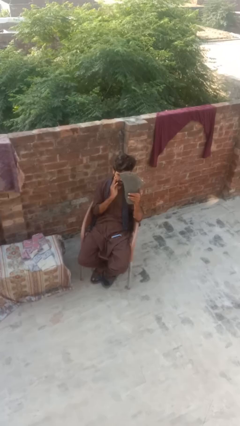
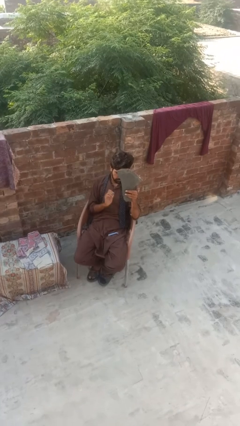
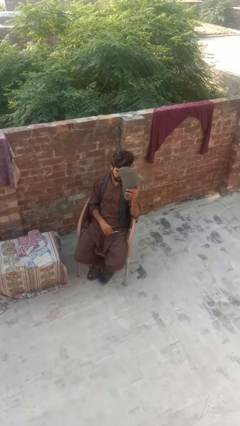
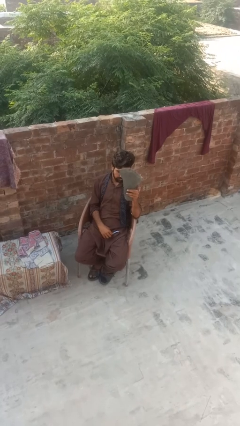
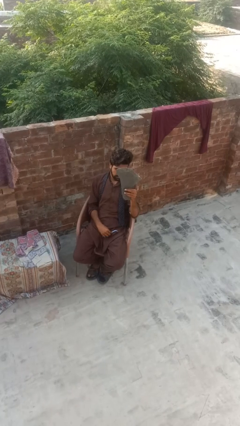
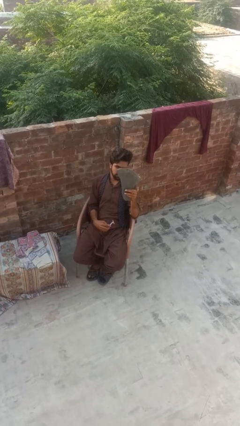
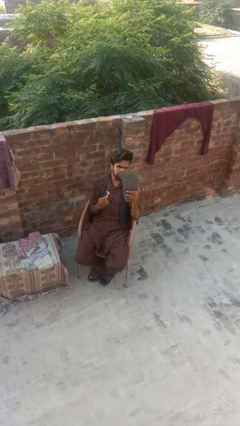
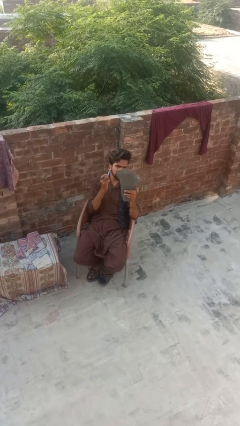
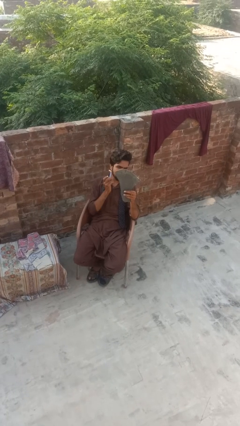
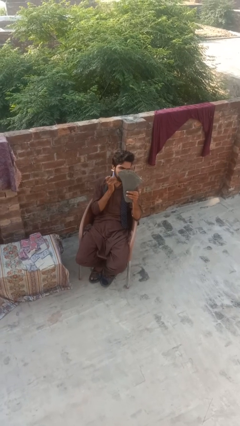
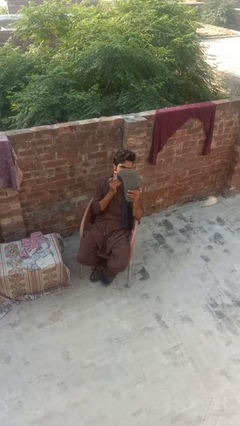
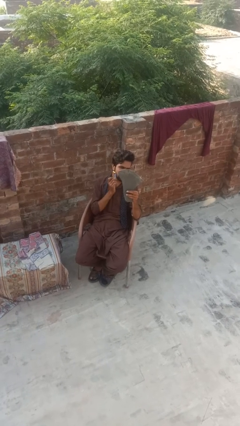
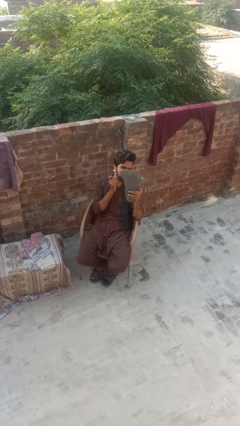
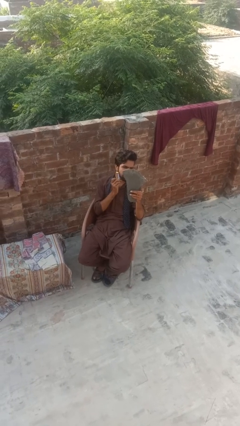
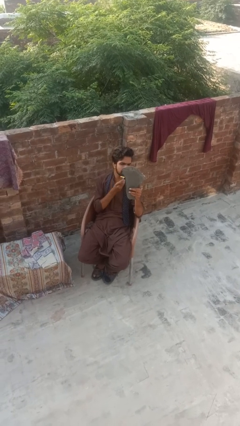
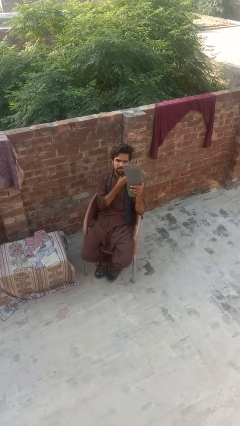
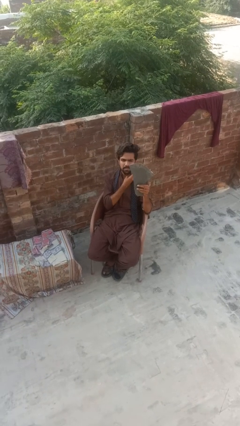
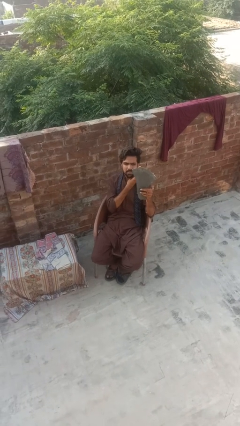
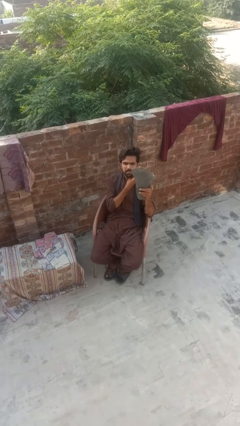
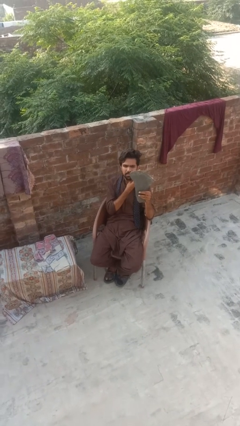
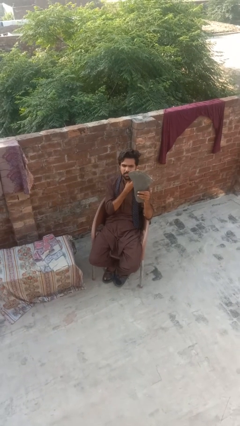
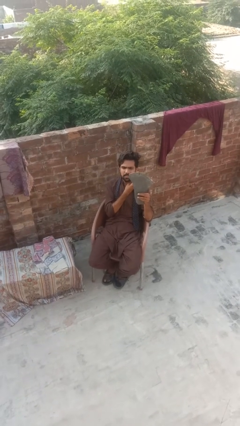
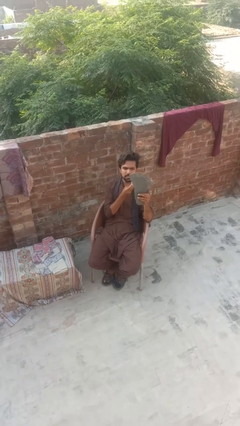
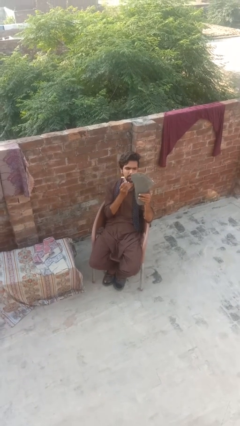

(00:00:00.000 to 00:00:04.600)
person shaves face

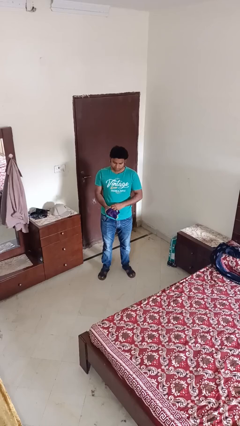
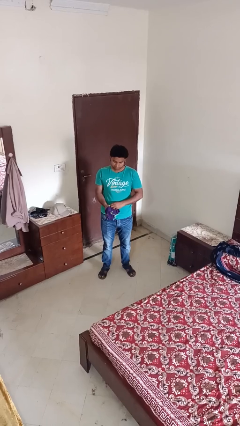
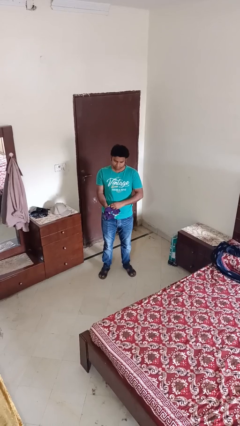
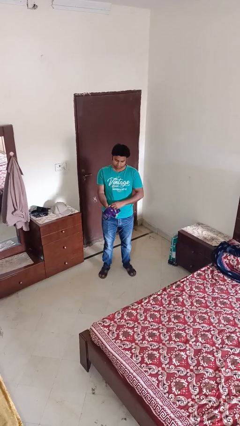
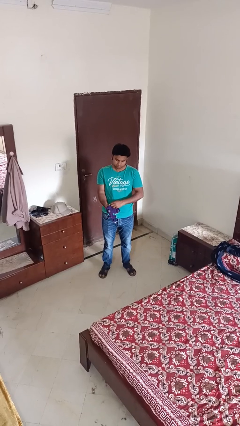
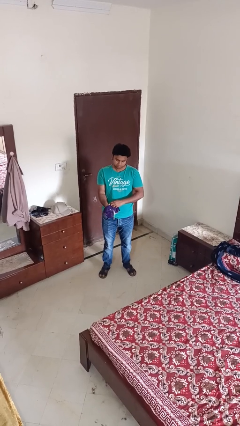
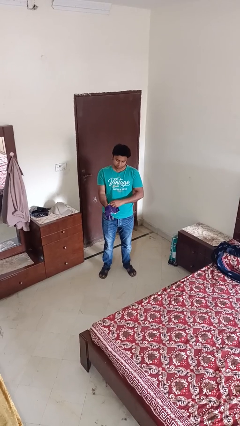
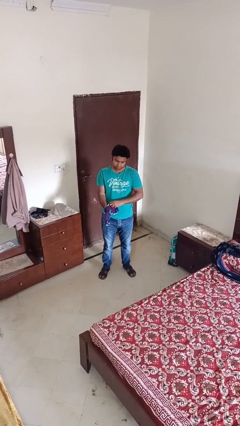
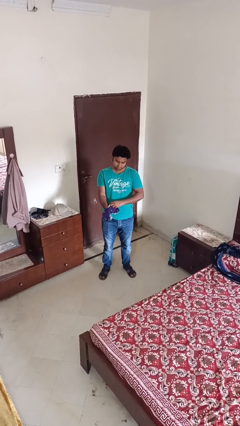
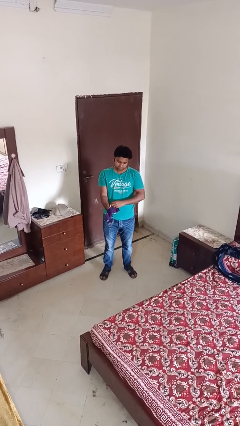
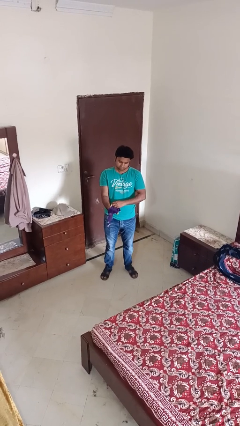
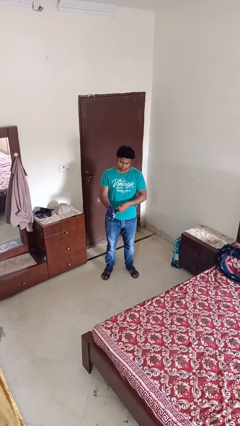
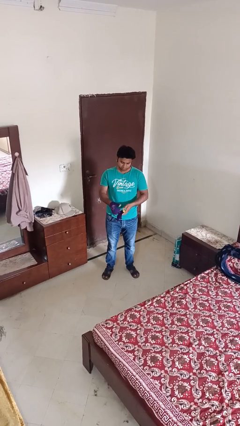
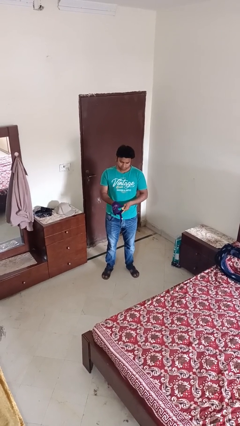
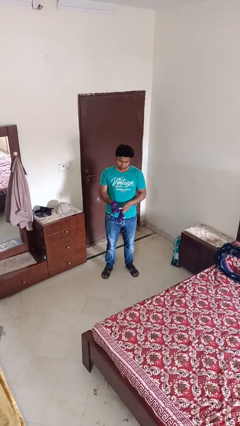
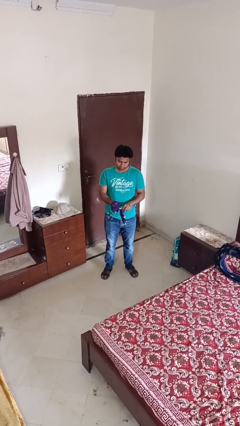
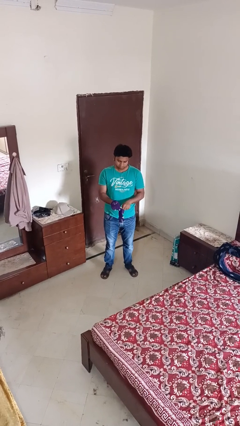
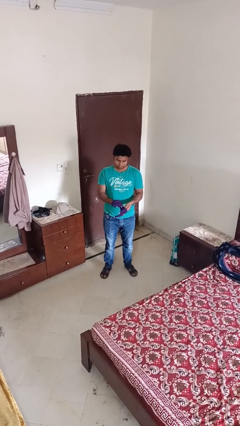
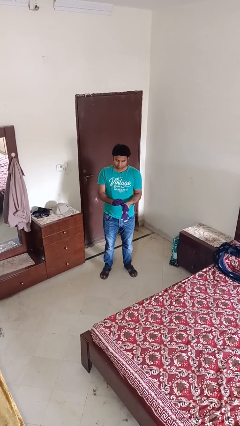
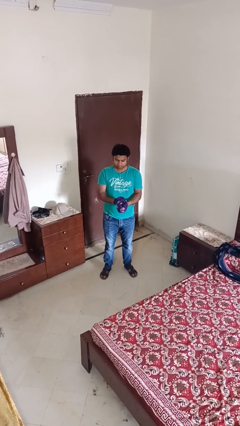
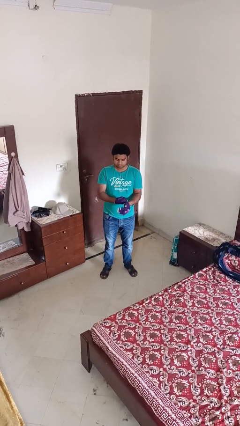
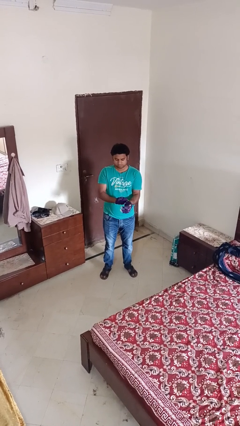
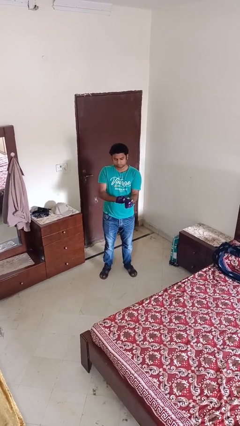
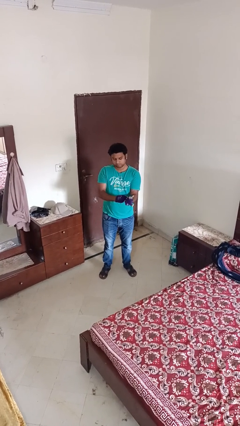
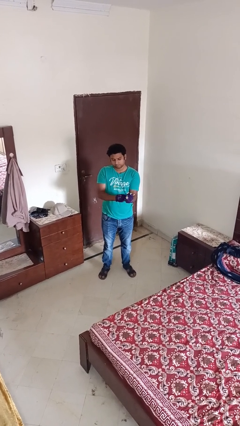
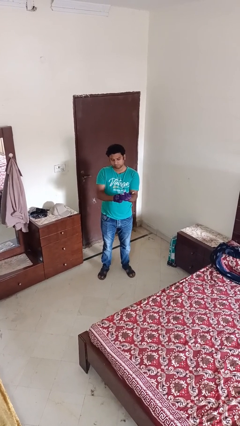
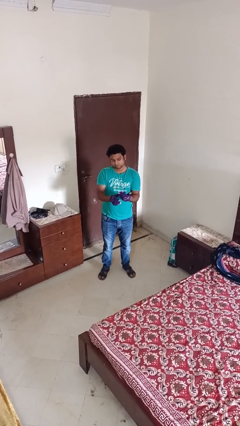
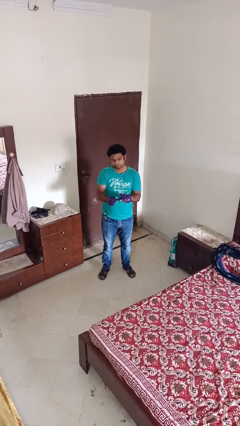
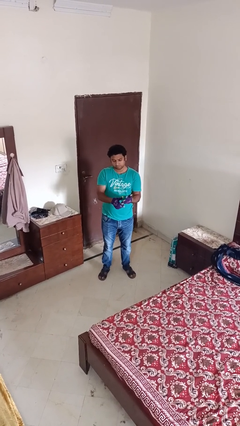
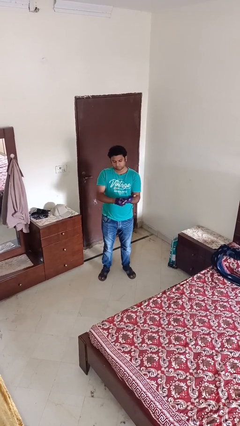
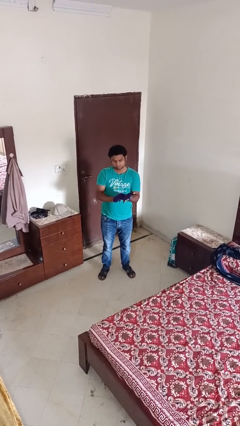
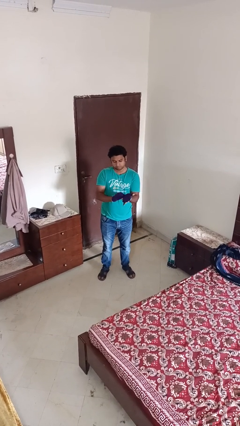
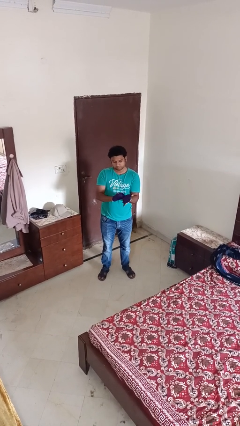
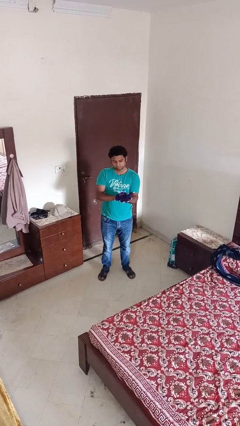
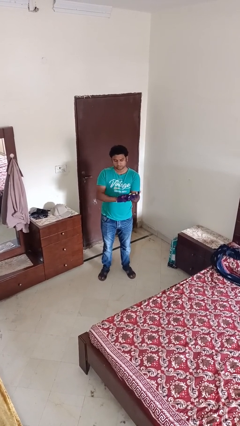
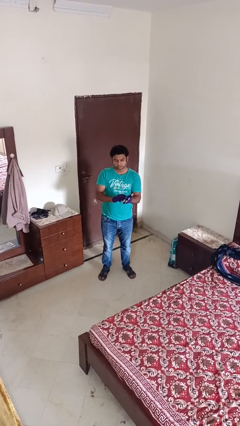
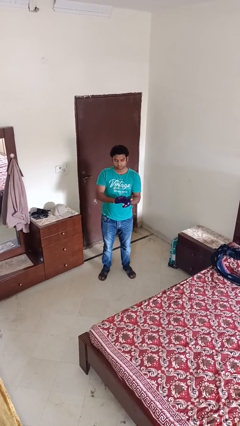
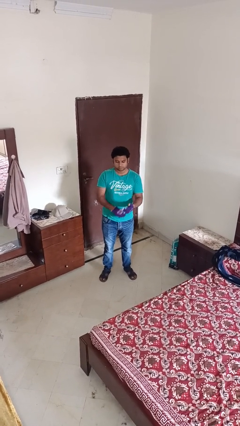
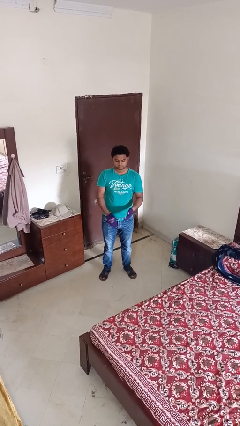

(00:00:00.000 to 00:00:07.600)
person puts on gloves

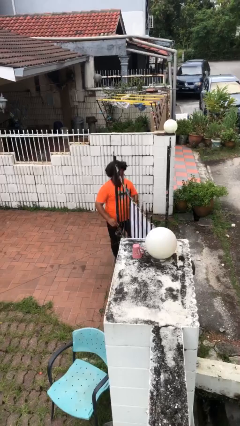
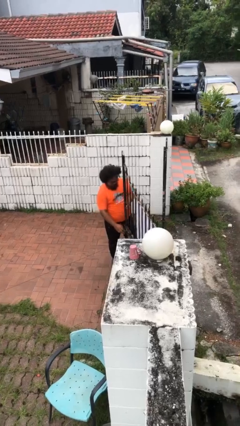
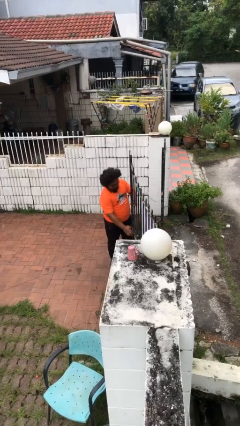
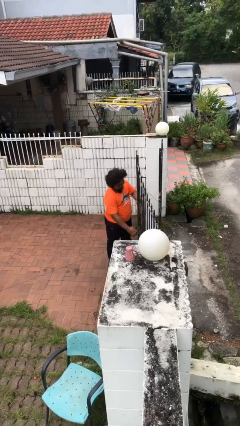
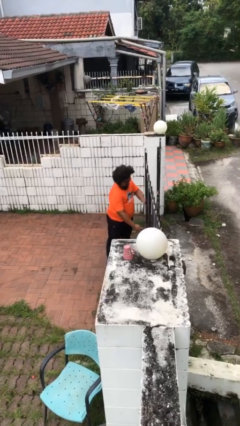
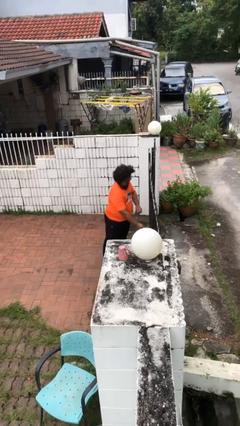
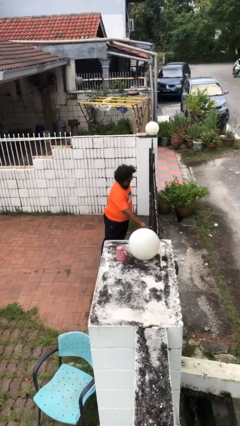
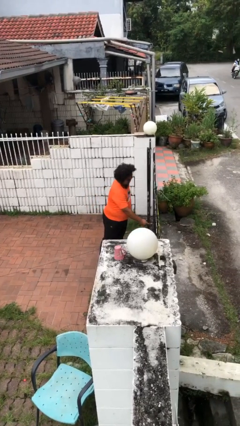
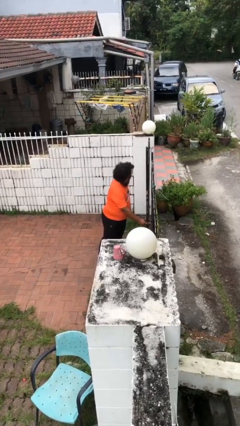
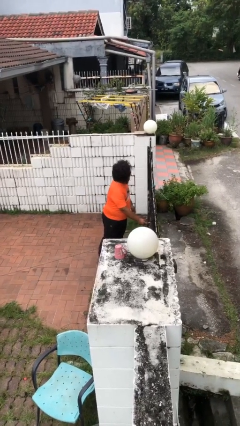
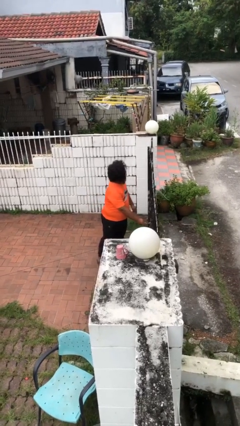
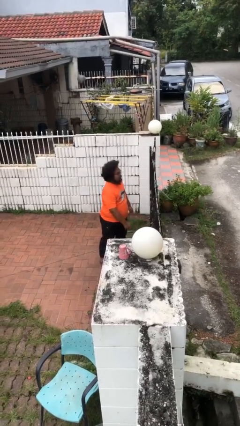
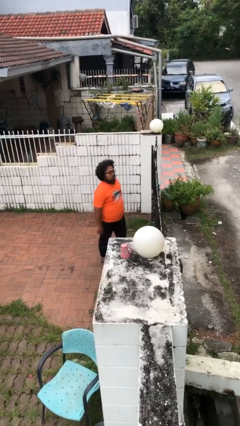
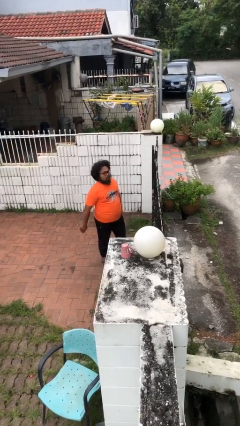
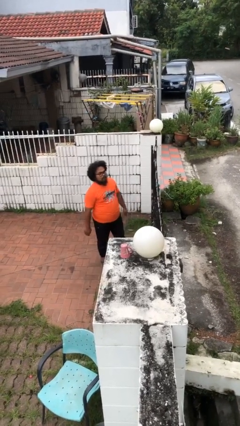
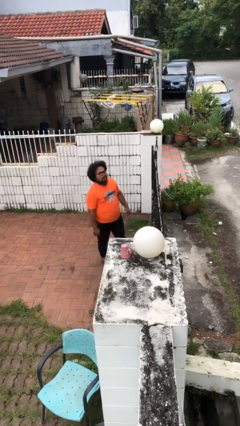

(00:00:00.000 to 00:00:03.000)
person closes facility door

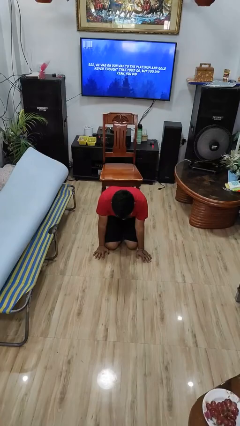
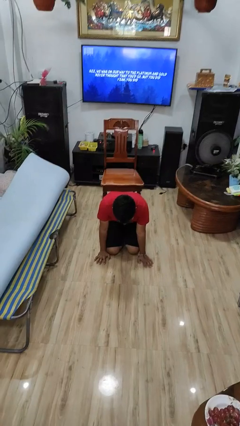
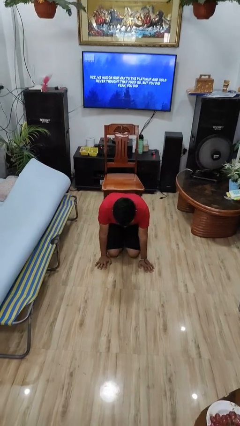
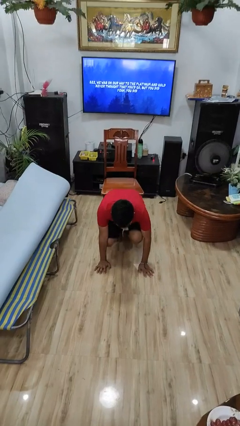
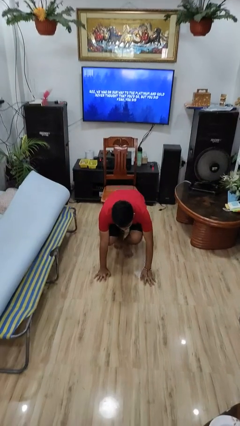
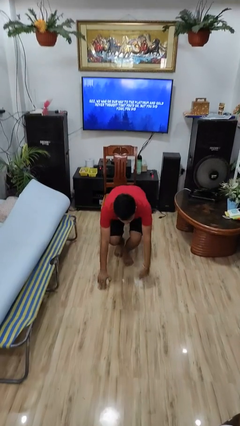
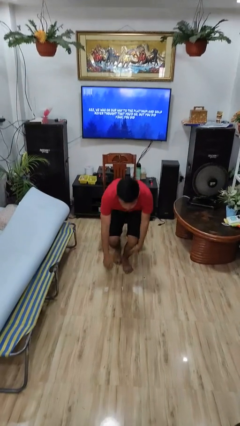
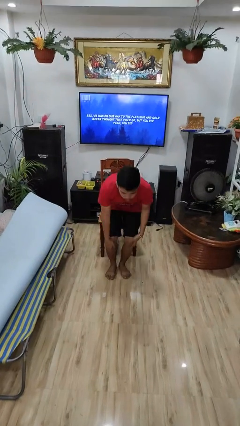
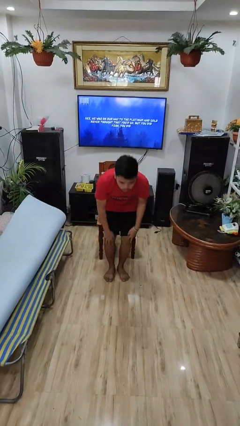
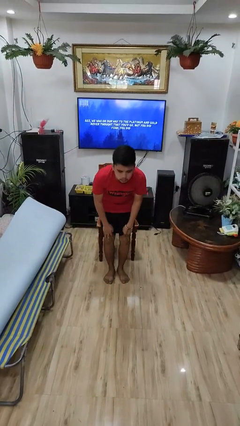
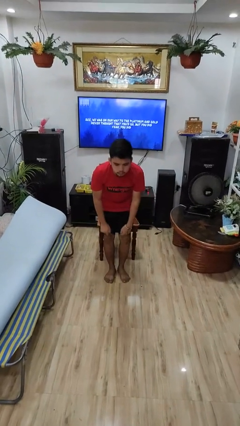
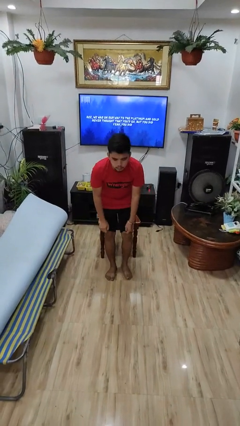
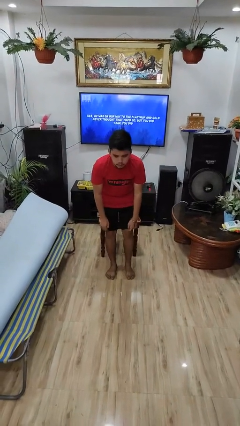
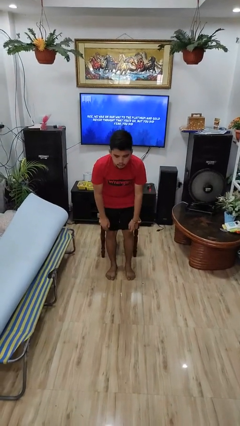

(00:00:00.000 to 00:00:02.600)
person stands up from floor
